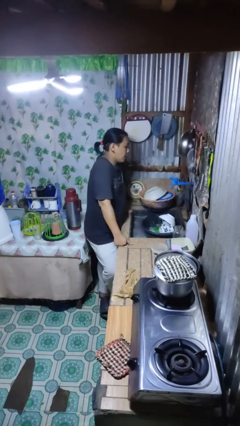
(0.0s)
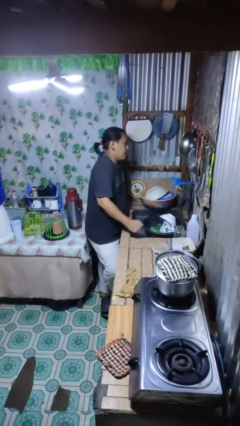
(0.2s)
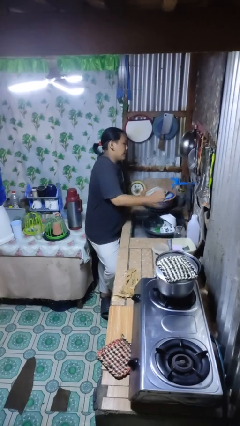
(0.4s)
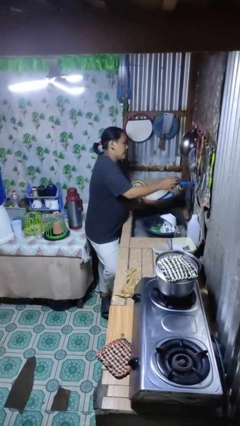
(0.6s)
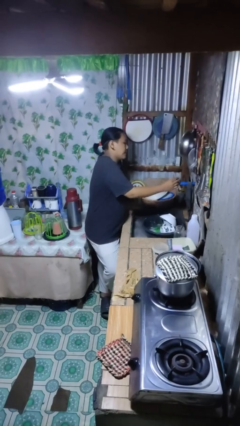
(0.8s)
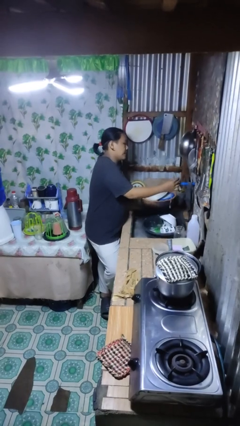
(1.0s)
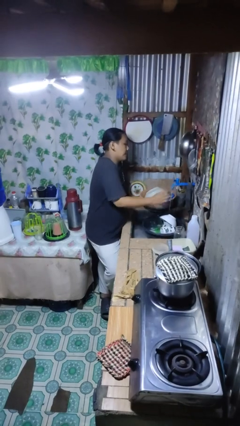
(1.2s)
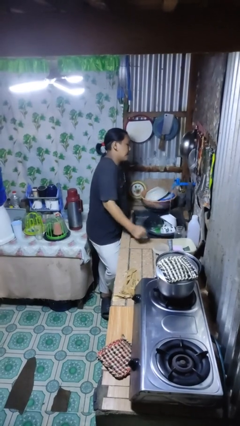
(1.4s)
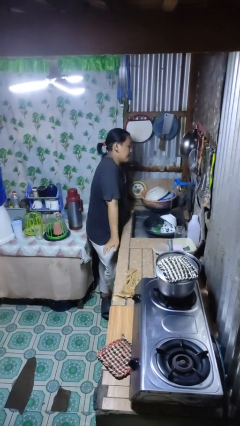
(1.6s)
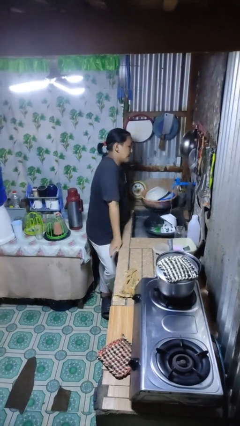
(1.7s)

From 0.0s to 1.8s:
person turns on faucet

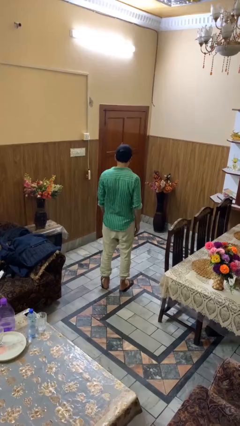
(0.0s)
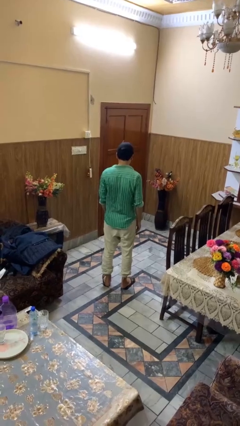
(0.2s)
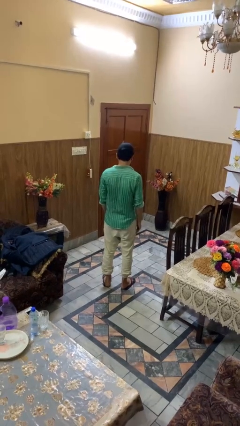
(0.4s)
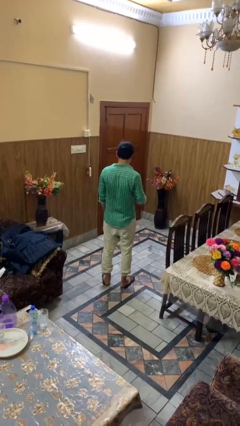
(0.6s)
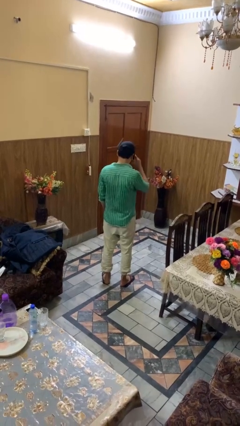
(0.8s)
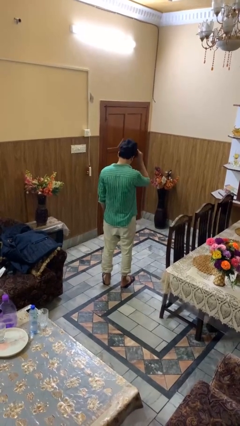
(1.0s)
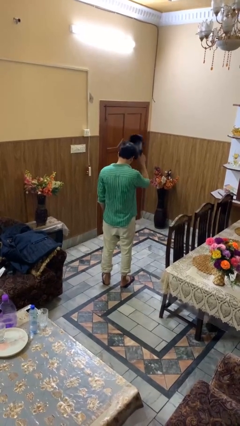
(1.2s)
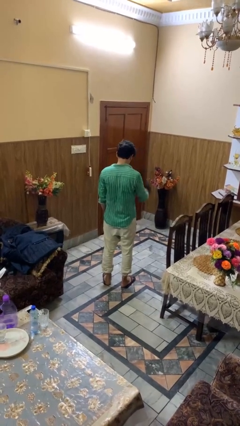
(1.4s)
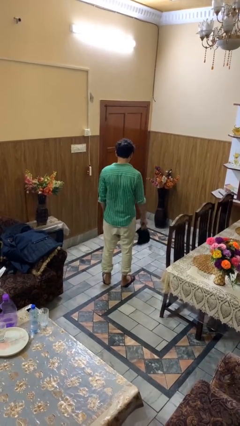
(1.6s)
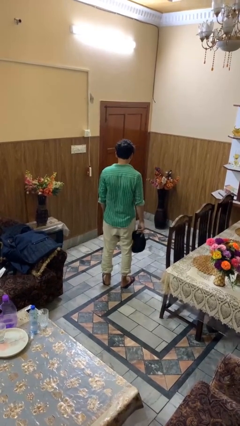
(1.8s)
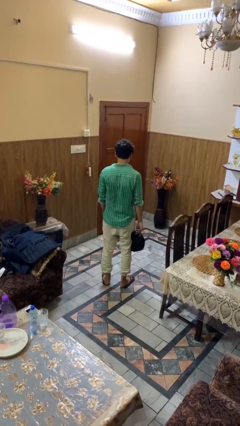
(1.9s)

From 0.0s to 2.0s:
person takes off hat

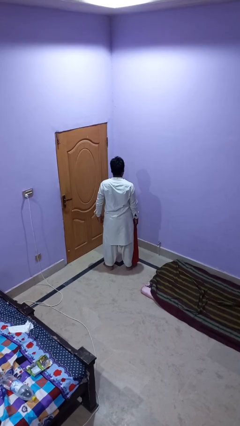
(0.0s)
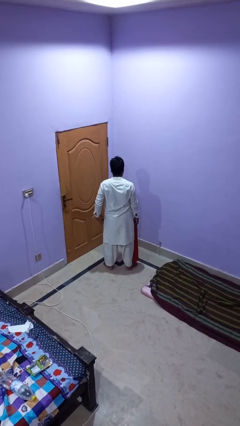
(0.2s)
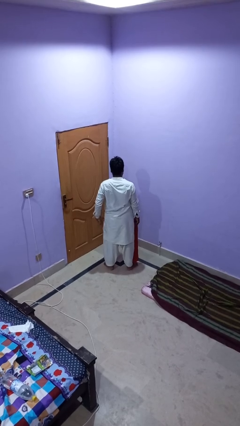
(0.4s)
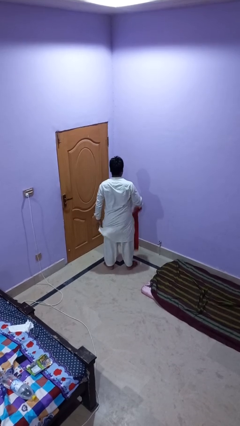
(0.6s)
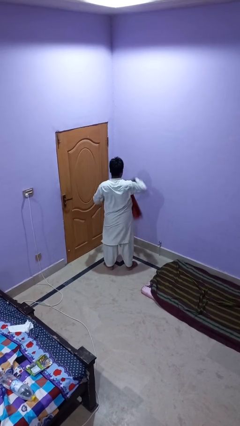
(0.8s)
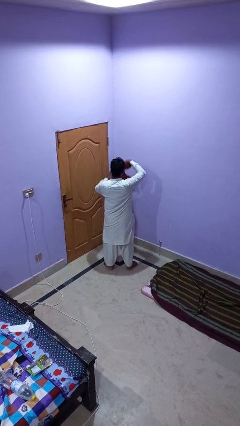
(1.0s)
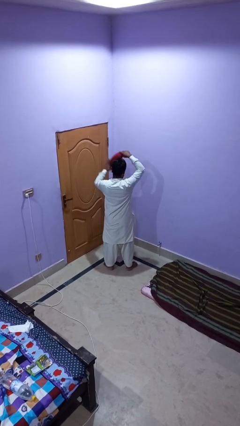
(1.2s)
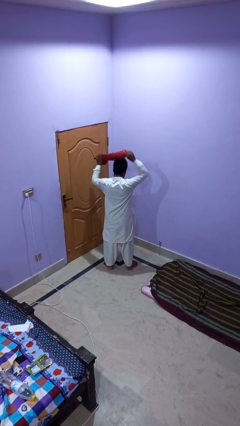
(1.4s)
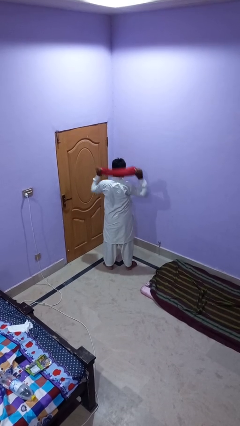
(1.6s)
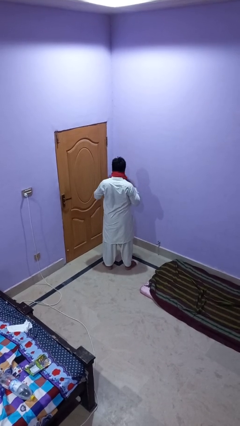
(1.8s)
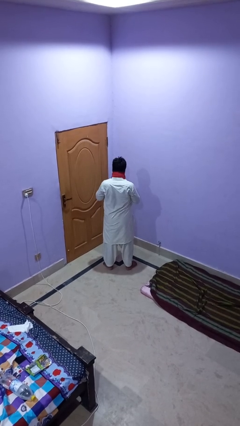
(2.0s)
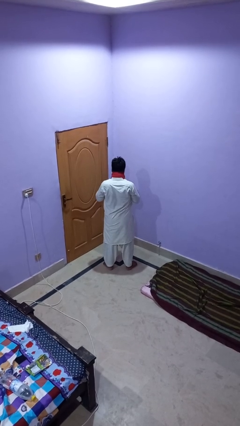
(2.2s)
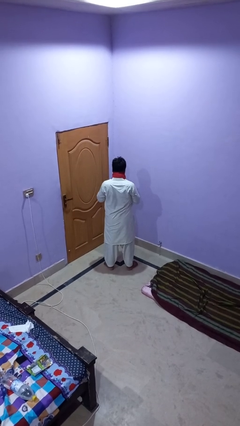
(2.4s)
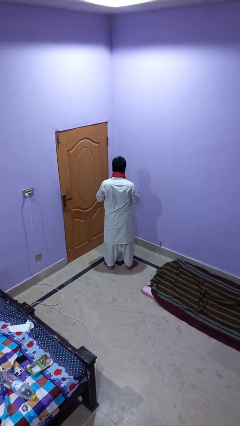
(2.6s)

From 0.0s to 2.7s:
person puts on scarf

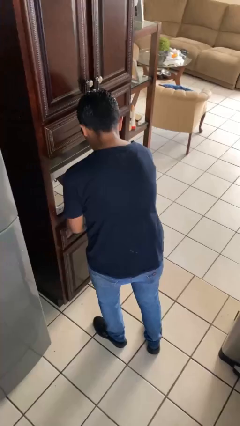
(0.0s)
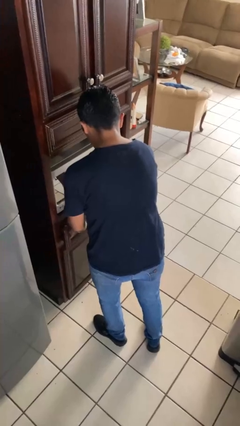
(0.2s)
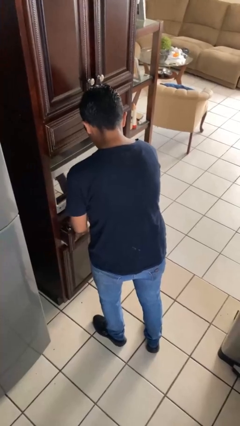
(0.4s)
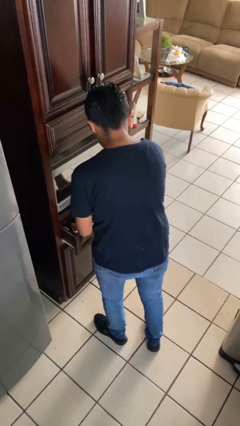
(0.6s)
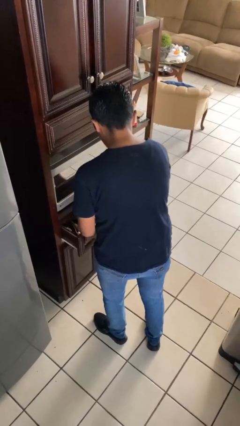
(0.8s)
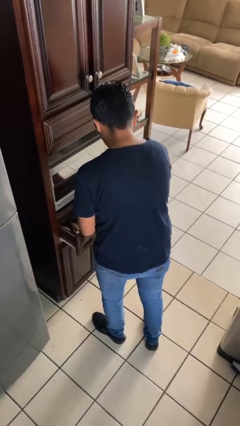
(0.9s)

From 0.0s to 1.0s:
person opens kitchen drawer

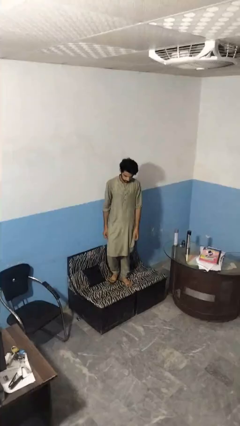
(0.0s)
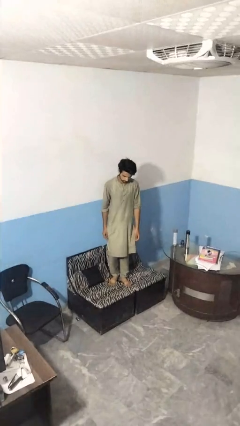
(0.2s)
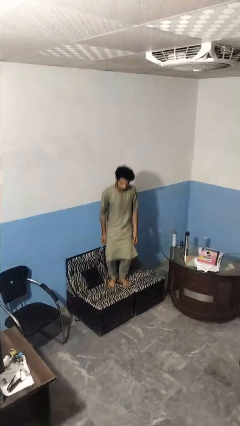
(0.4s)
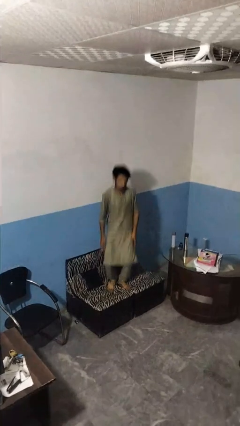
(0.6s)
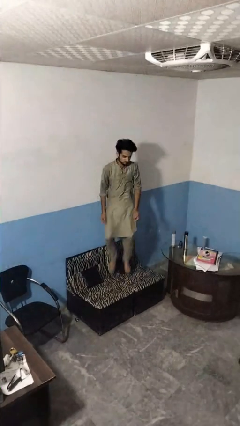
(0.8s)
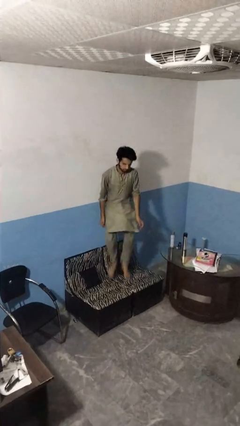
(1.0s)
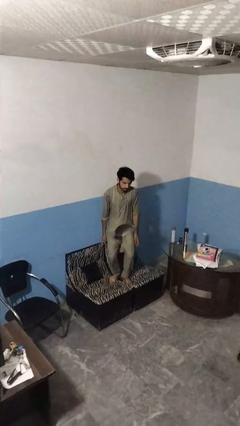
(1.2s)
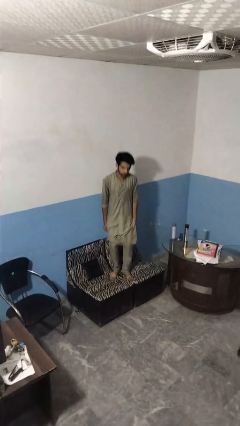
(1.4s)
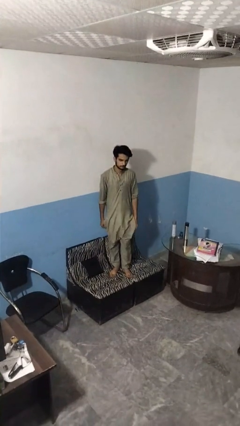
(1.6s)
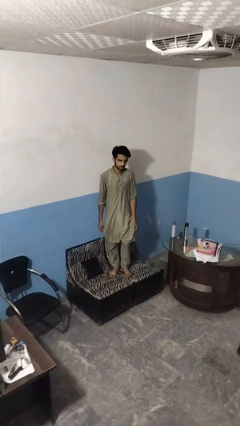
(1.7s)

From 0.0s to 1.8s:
person jumps on couch

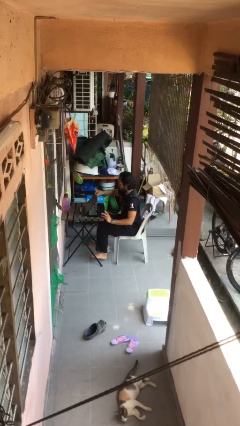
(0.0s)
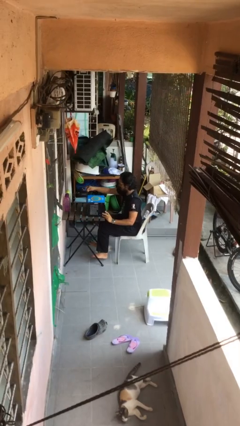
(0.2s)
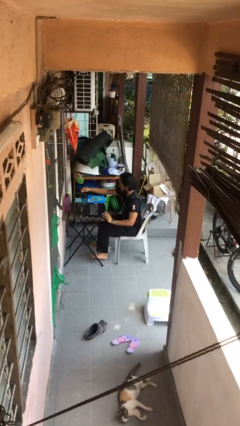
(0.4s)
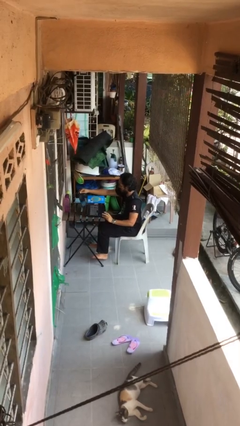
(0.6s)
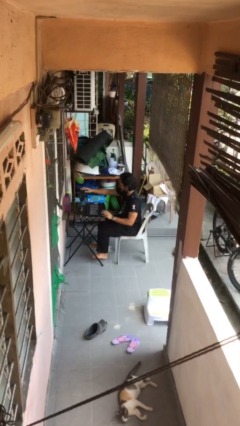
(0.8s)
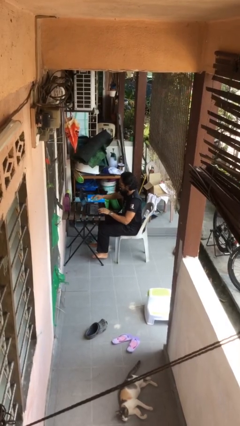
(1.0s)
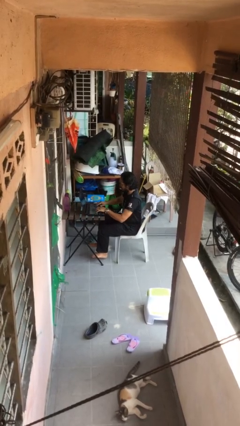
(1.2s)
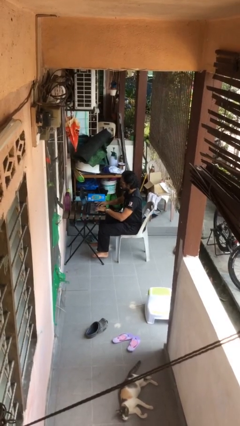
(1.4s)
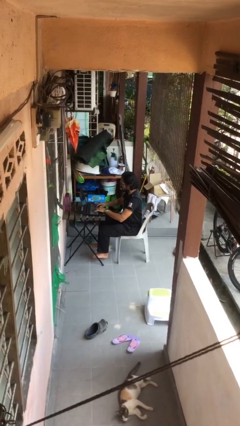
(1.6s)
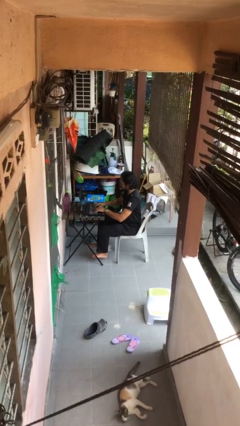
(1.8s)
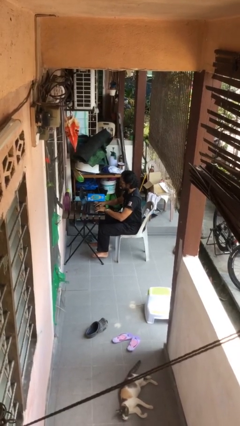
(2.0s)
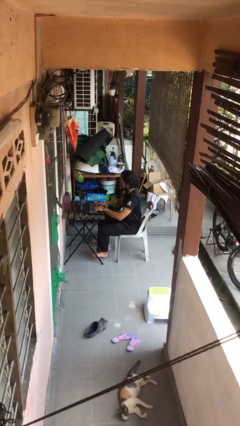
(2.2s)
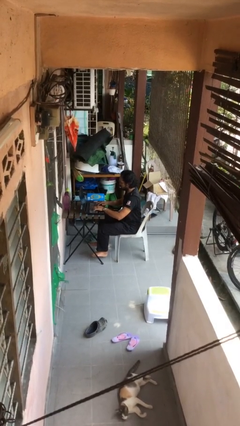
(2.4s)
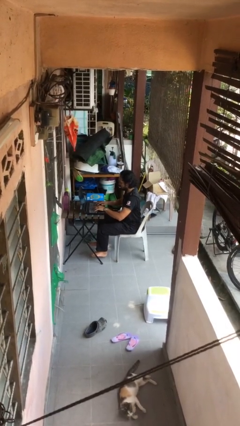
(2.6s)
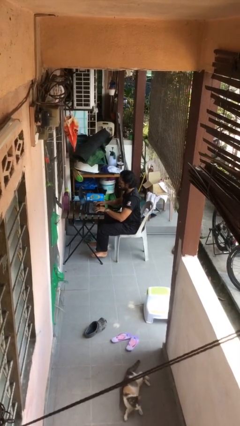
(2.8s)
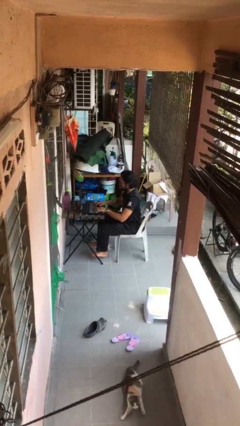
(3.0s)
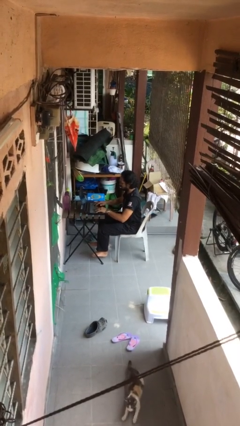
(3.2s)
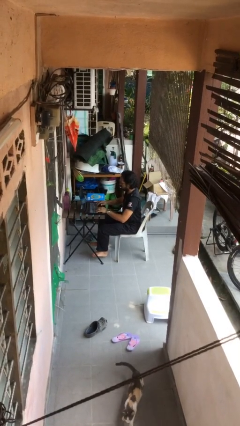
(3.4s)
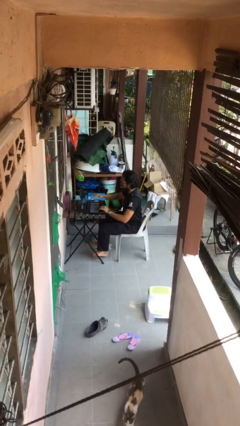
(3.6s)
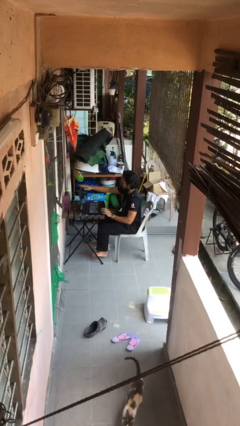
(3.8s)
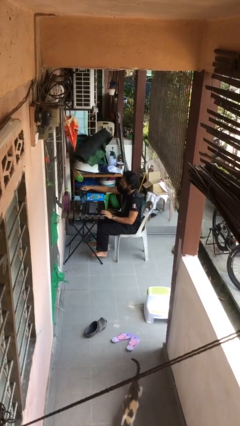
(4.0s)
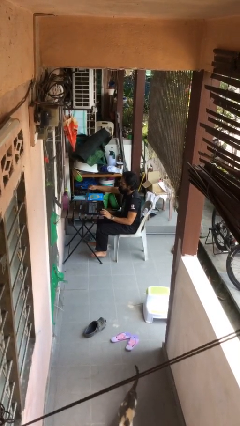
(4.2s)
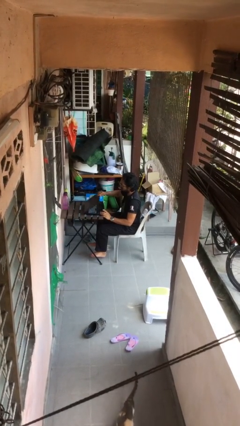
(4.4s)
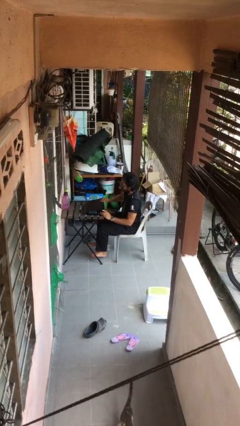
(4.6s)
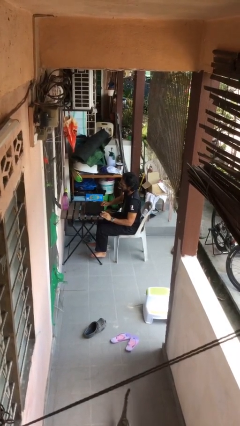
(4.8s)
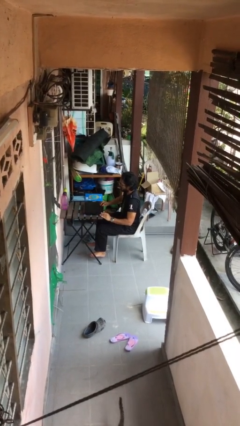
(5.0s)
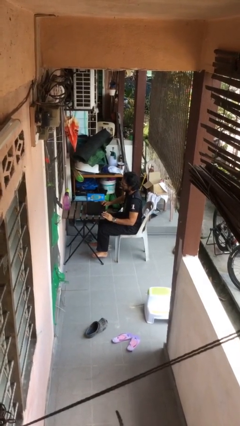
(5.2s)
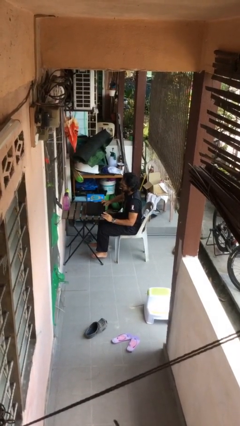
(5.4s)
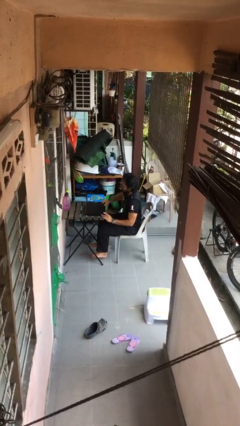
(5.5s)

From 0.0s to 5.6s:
person interacts with laptop

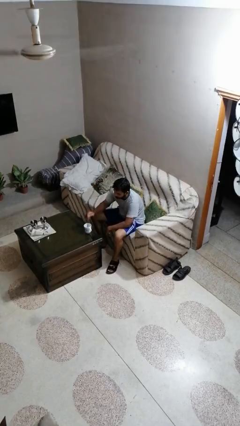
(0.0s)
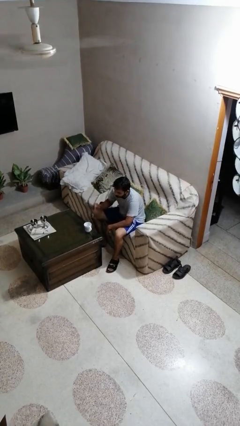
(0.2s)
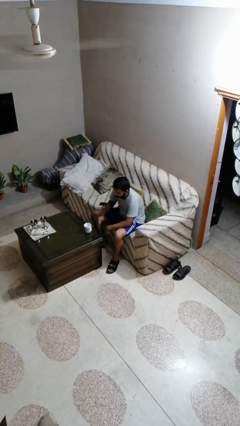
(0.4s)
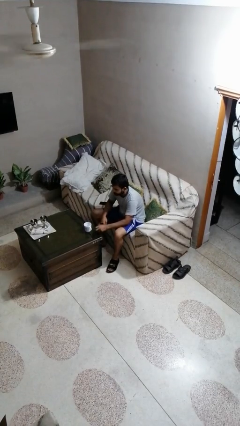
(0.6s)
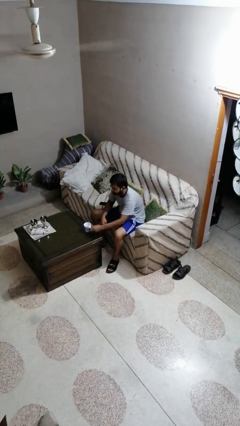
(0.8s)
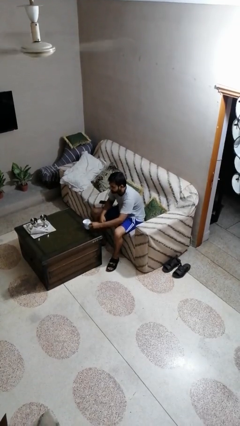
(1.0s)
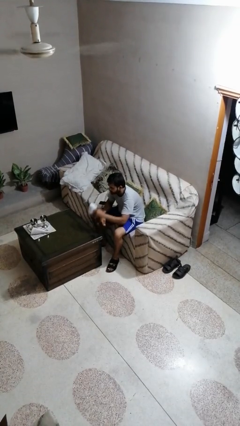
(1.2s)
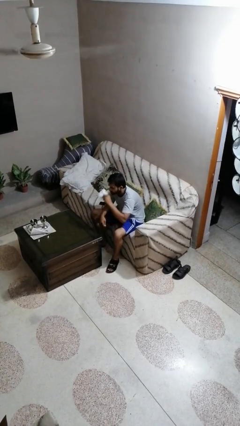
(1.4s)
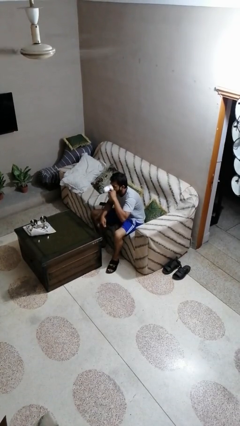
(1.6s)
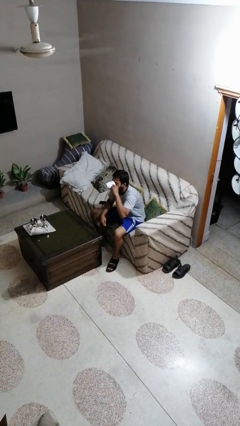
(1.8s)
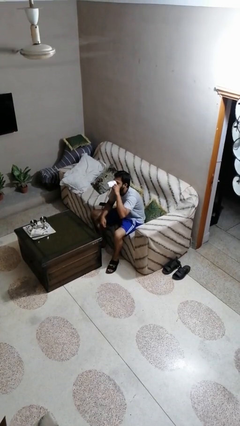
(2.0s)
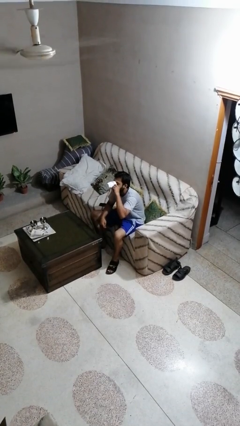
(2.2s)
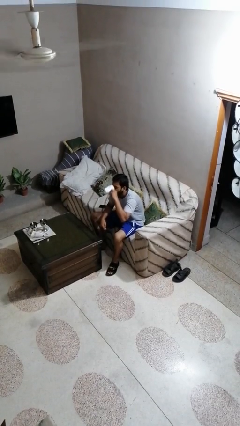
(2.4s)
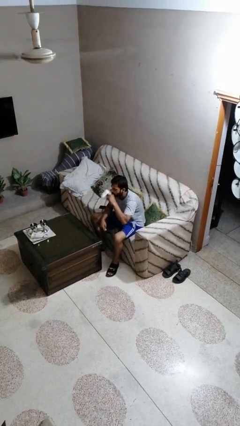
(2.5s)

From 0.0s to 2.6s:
person drinks from mug
